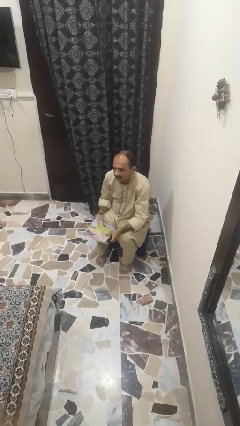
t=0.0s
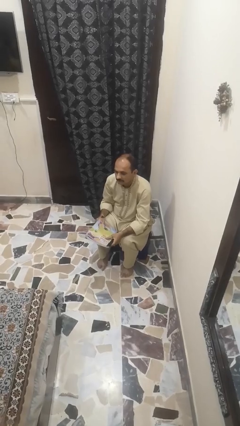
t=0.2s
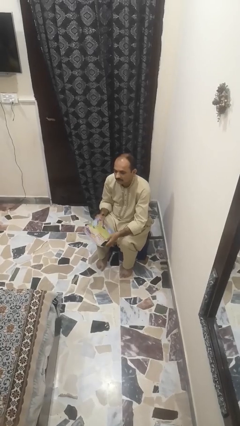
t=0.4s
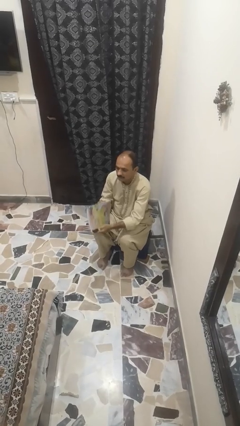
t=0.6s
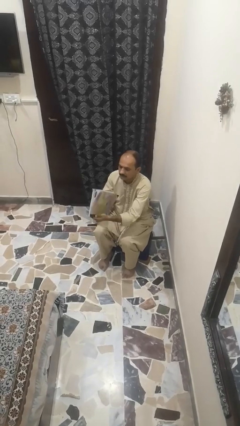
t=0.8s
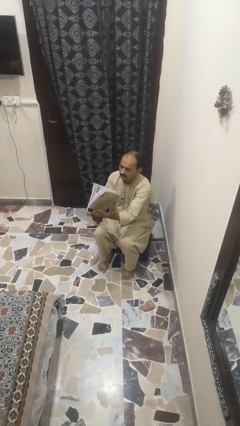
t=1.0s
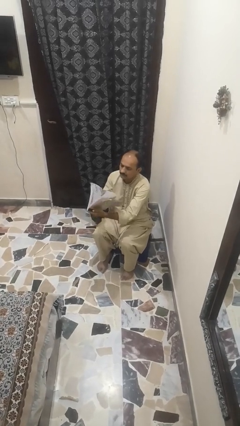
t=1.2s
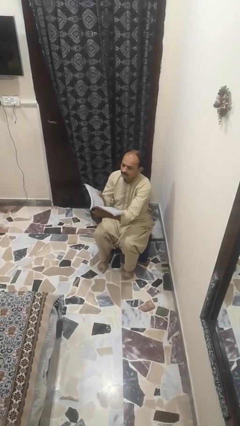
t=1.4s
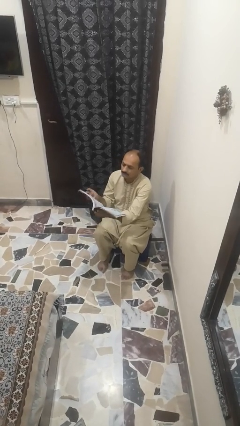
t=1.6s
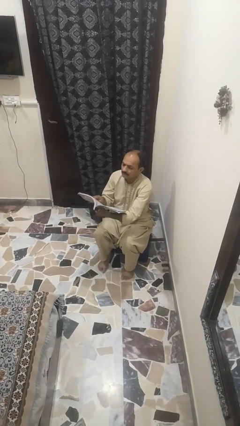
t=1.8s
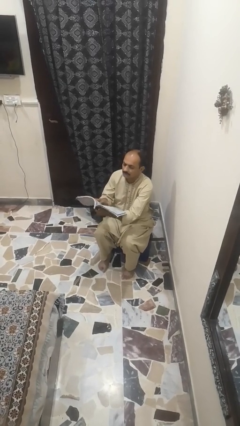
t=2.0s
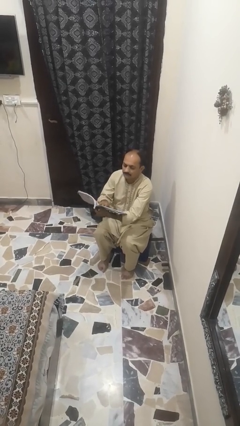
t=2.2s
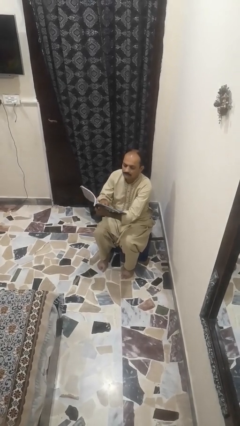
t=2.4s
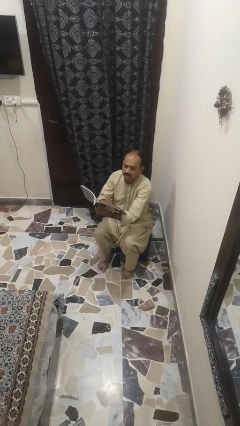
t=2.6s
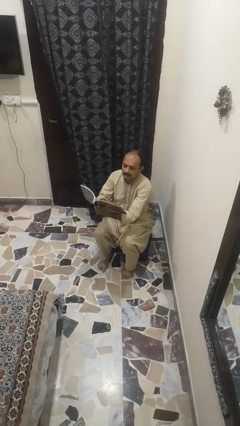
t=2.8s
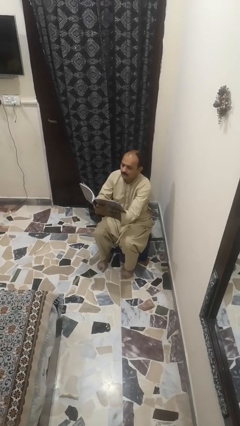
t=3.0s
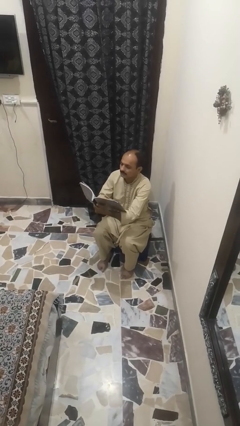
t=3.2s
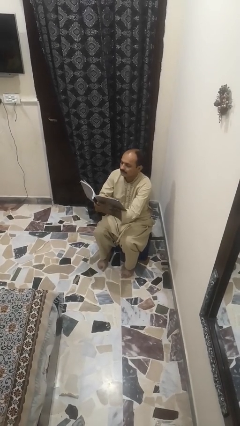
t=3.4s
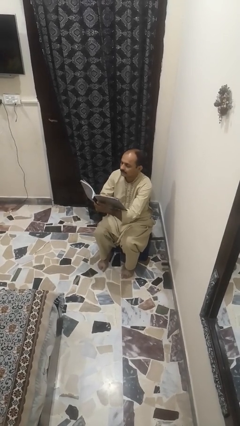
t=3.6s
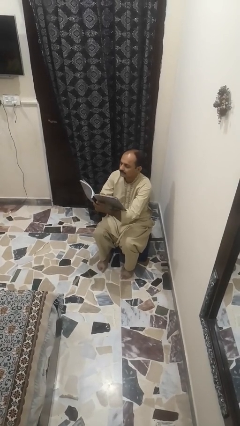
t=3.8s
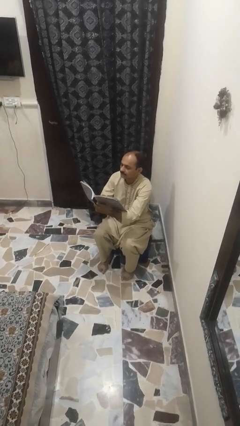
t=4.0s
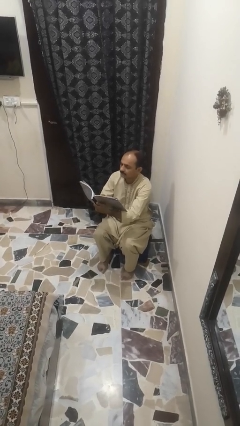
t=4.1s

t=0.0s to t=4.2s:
person reads book

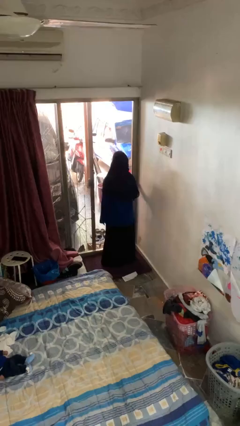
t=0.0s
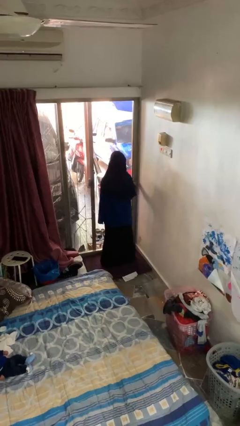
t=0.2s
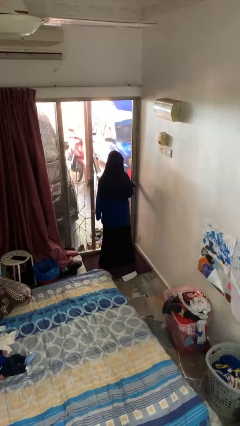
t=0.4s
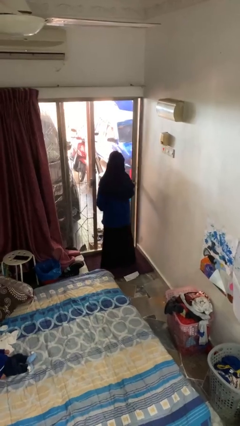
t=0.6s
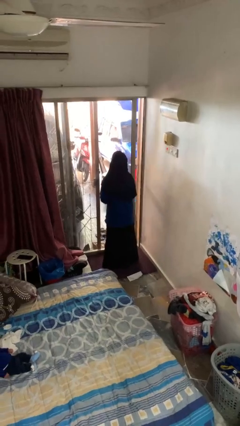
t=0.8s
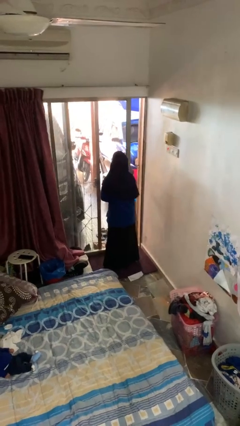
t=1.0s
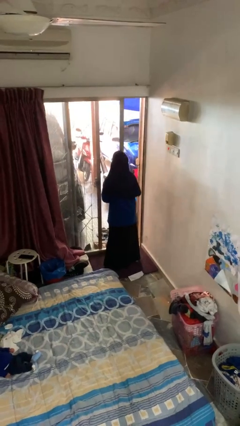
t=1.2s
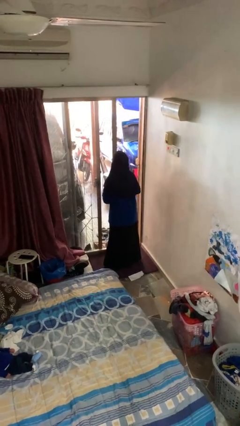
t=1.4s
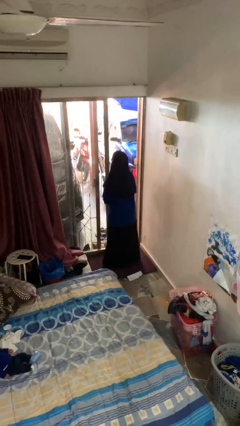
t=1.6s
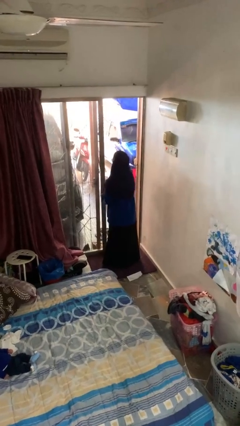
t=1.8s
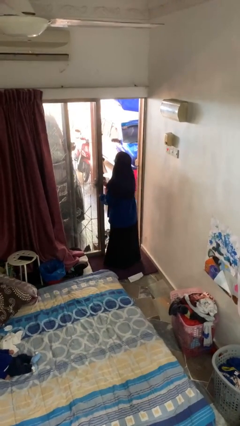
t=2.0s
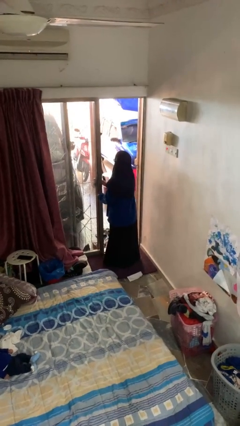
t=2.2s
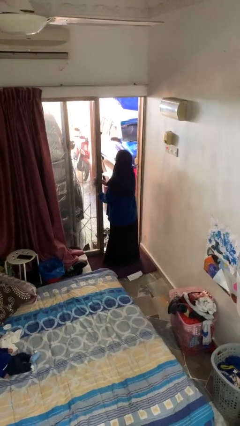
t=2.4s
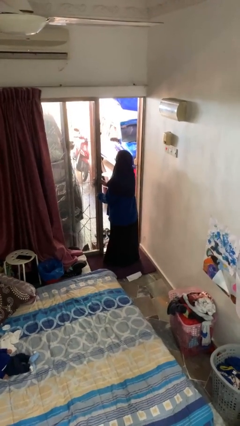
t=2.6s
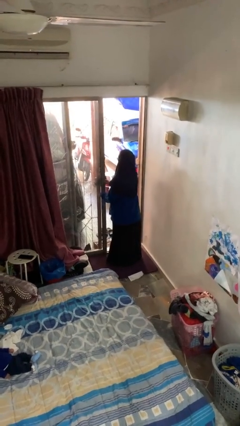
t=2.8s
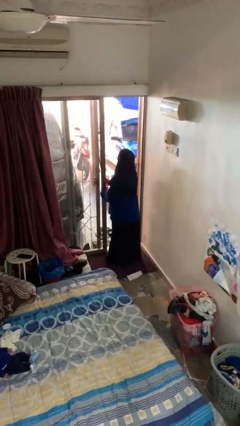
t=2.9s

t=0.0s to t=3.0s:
person opens sliding door

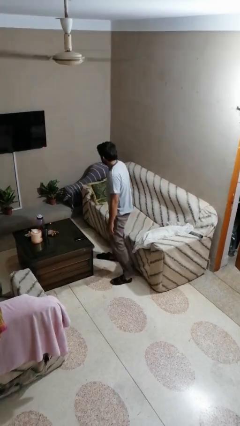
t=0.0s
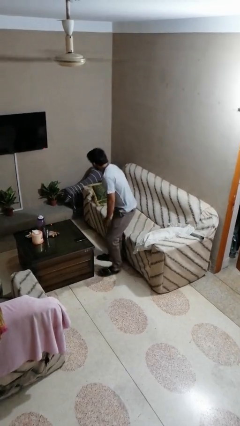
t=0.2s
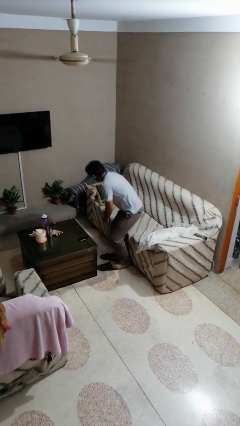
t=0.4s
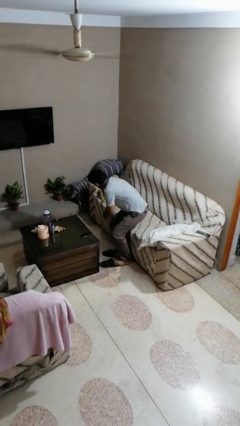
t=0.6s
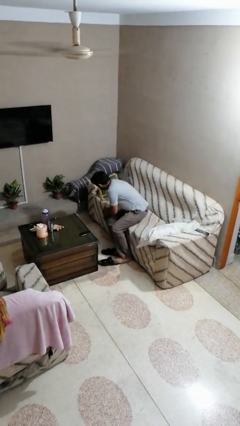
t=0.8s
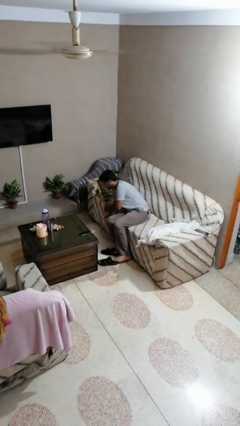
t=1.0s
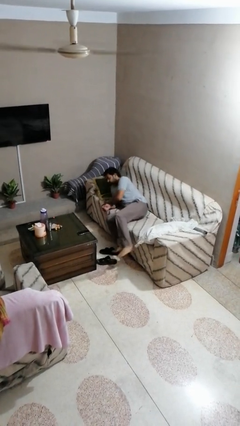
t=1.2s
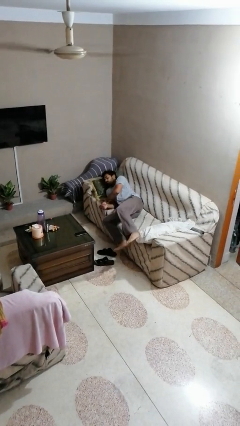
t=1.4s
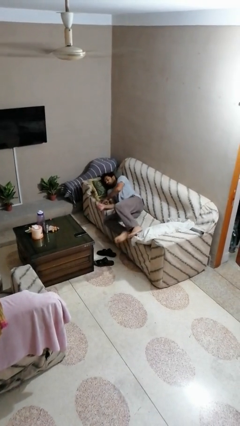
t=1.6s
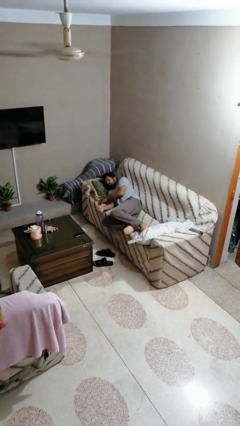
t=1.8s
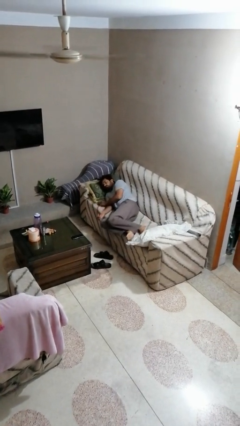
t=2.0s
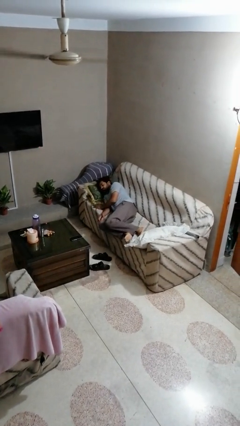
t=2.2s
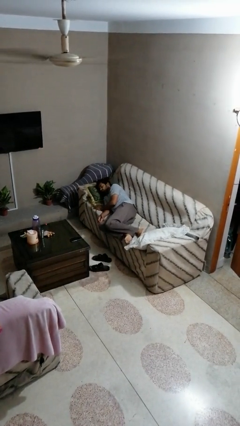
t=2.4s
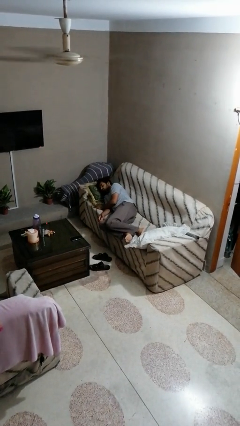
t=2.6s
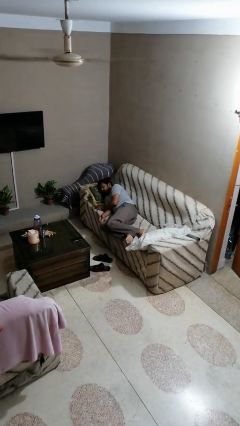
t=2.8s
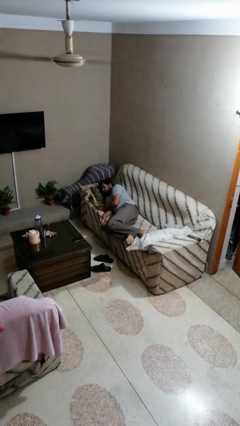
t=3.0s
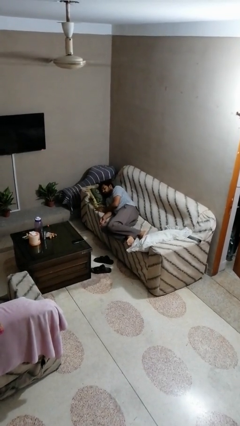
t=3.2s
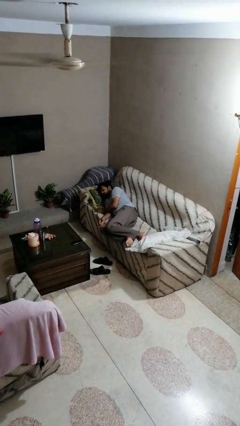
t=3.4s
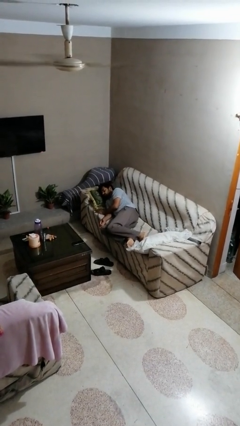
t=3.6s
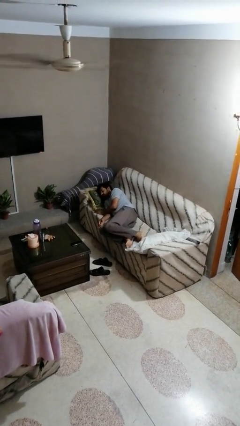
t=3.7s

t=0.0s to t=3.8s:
person lies down on couch

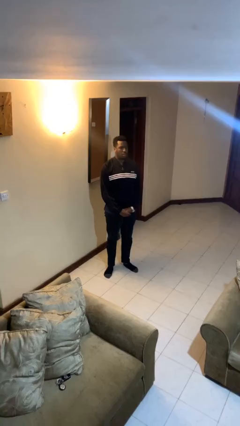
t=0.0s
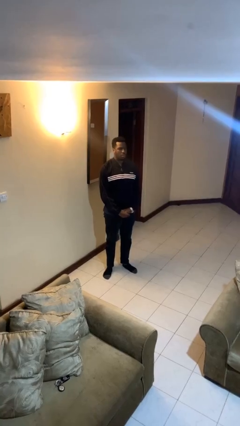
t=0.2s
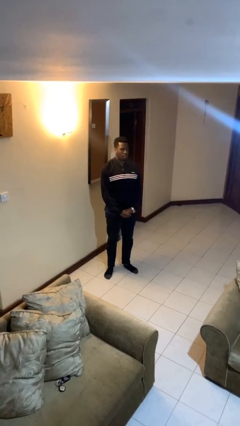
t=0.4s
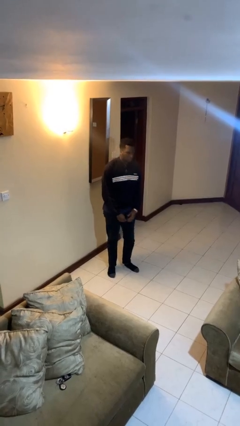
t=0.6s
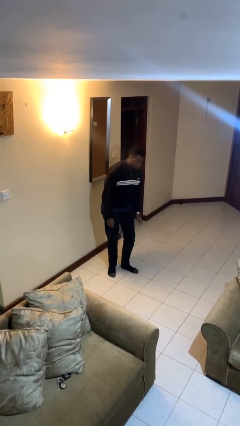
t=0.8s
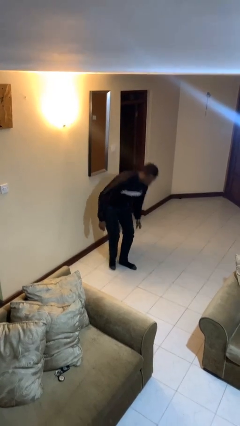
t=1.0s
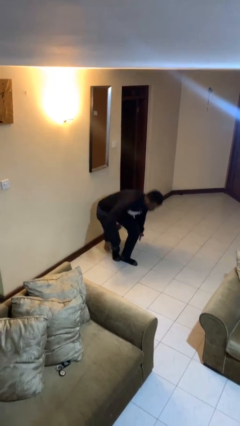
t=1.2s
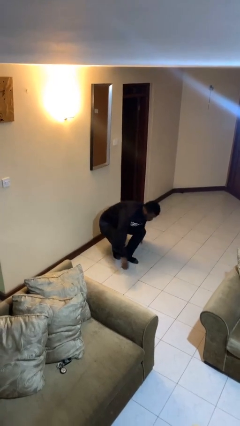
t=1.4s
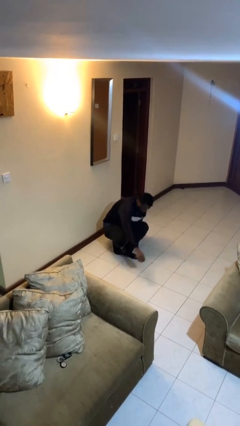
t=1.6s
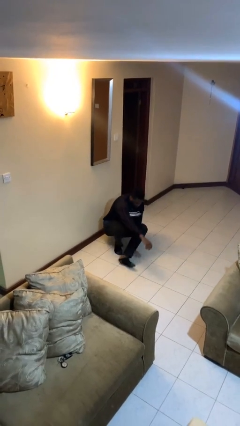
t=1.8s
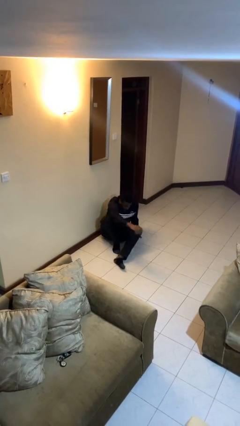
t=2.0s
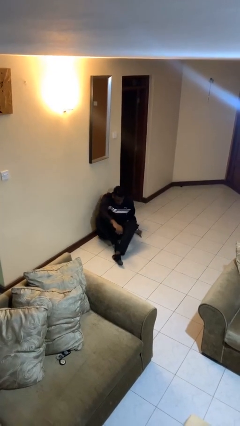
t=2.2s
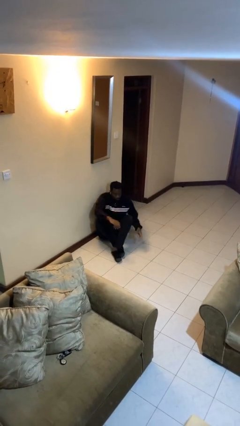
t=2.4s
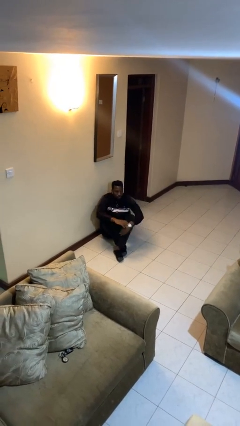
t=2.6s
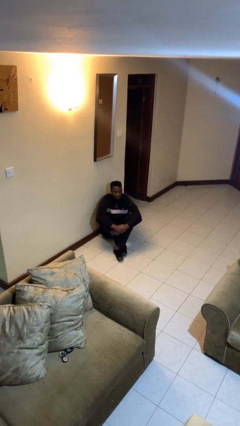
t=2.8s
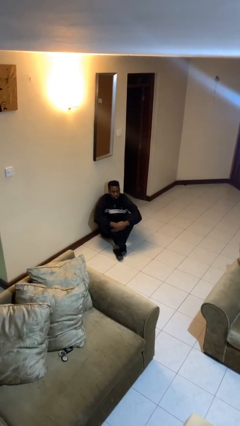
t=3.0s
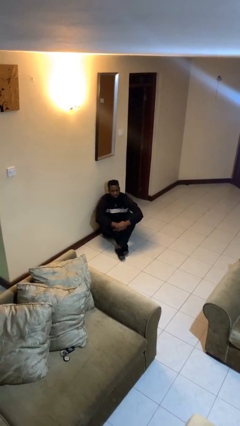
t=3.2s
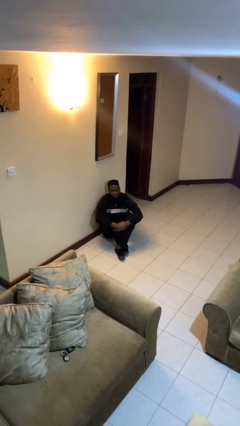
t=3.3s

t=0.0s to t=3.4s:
person sits crisscross

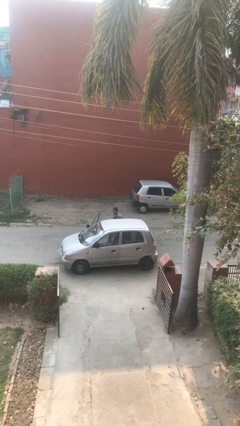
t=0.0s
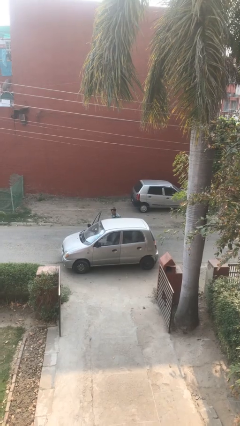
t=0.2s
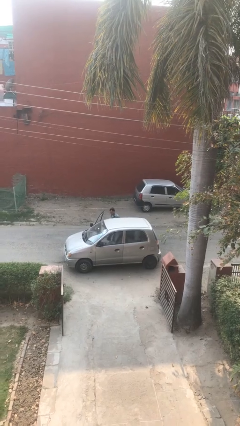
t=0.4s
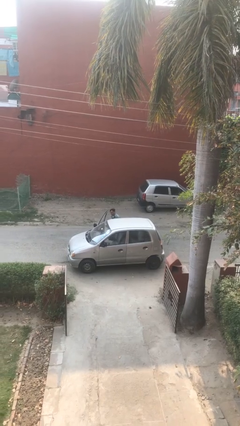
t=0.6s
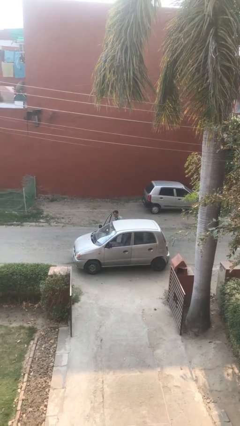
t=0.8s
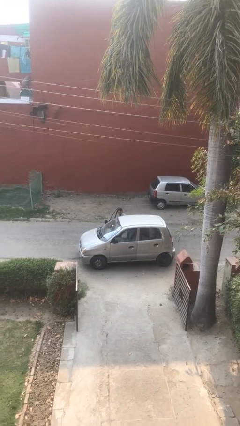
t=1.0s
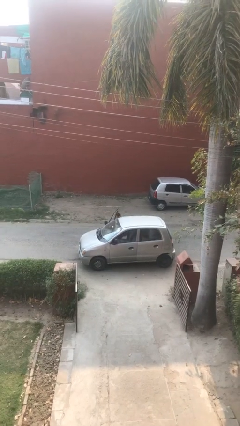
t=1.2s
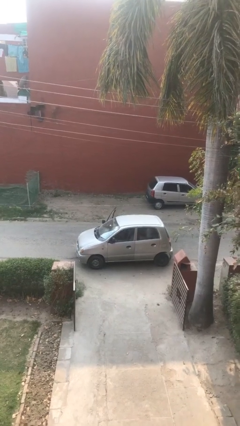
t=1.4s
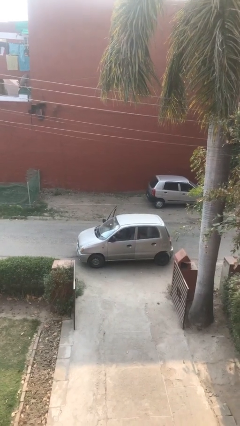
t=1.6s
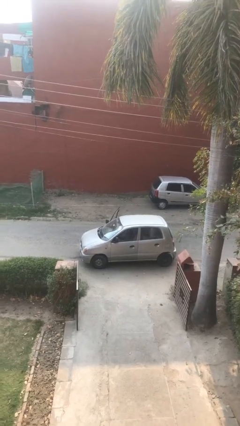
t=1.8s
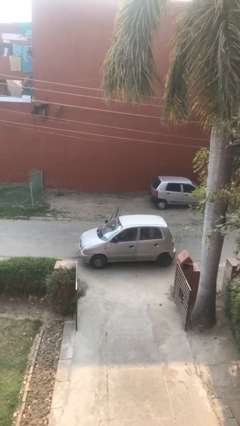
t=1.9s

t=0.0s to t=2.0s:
person enters car

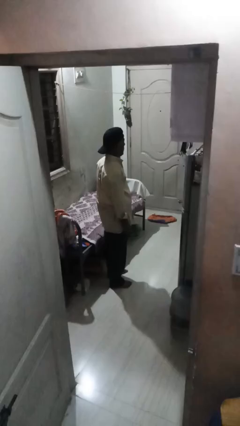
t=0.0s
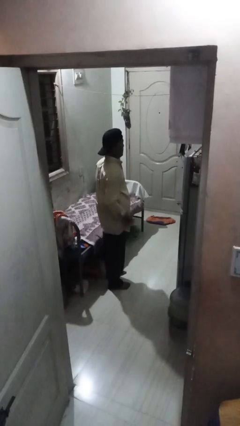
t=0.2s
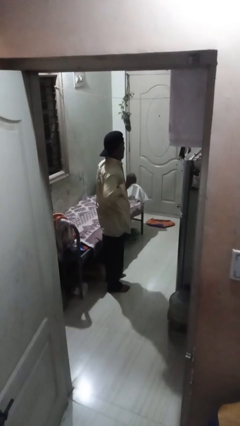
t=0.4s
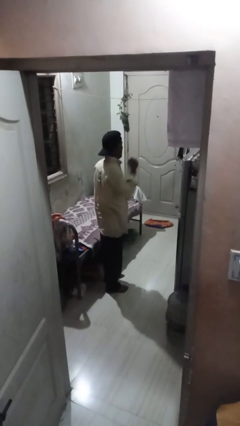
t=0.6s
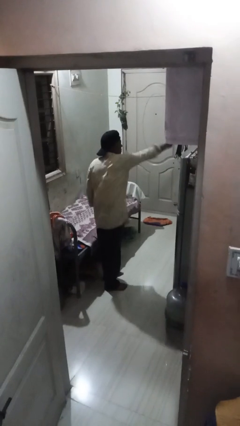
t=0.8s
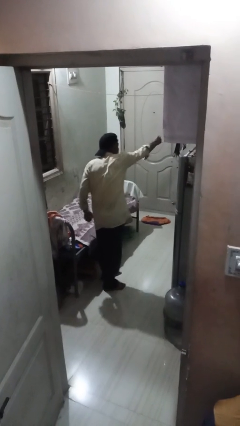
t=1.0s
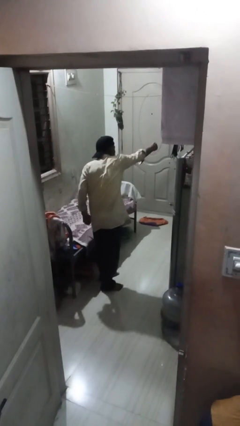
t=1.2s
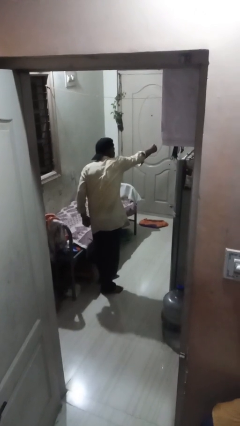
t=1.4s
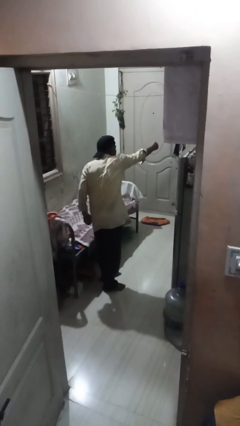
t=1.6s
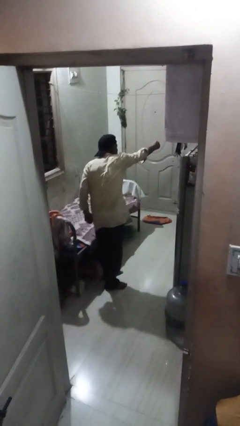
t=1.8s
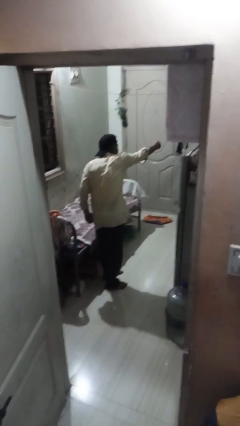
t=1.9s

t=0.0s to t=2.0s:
person punches
